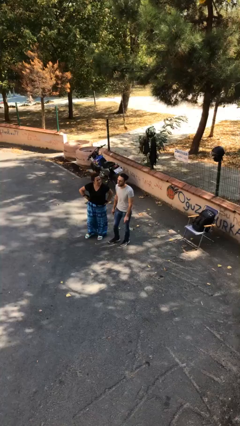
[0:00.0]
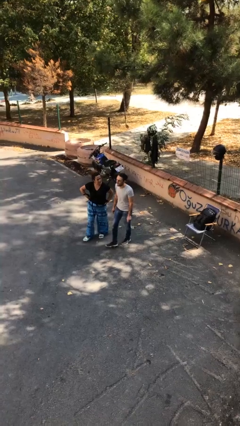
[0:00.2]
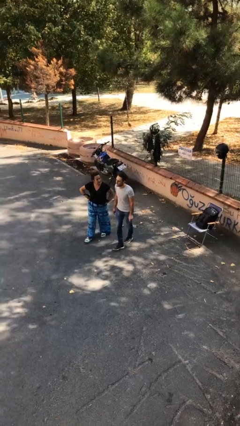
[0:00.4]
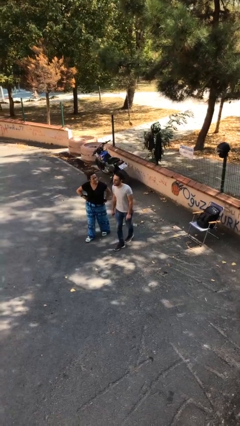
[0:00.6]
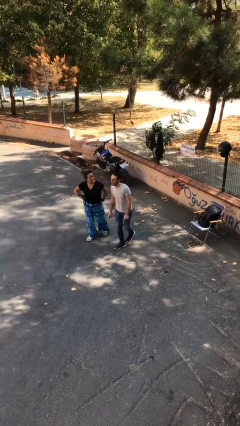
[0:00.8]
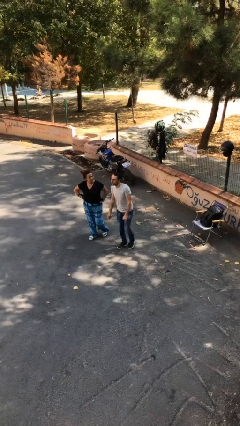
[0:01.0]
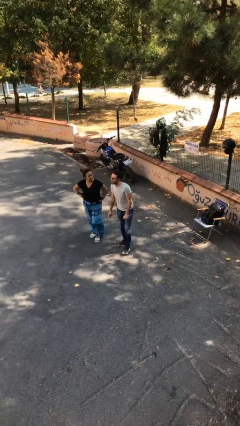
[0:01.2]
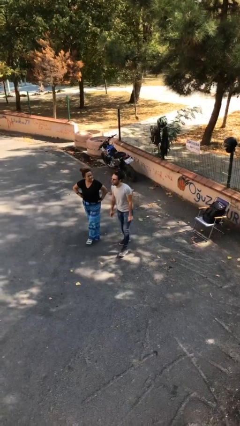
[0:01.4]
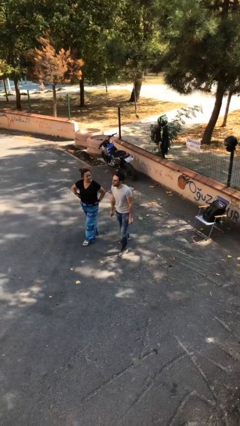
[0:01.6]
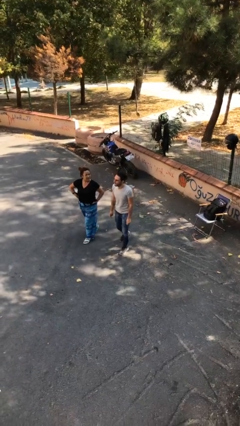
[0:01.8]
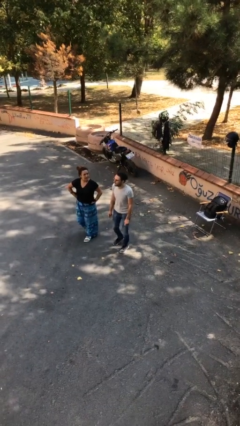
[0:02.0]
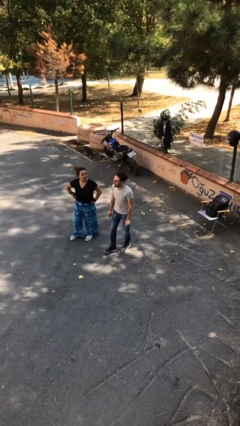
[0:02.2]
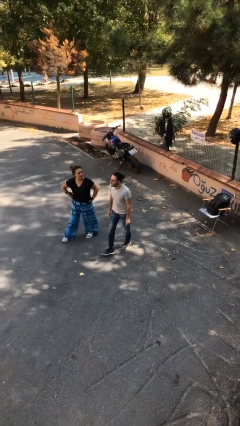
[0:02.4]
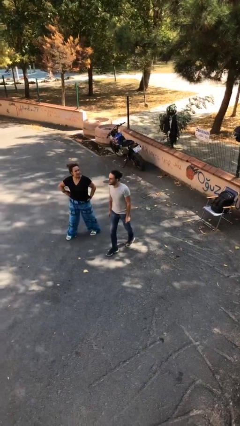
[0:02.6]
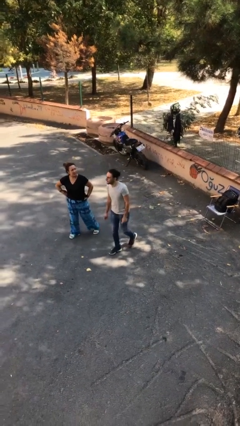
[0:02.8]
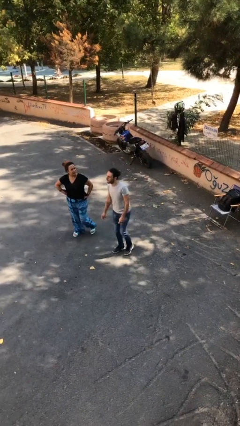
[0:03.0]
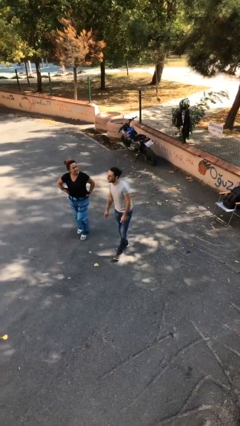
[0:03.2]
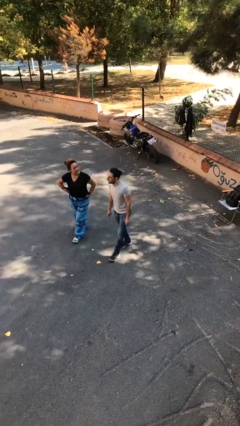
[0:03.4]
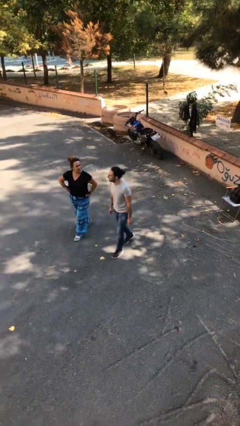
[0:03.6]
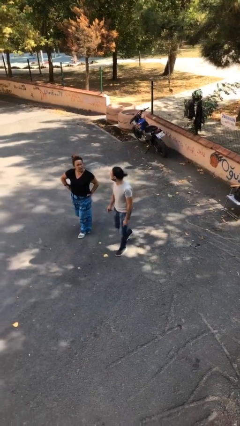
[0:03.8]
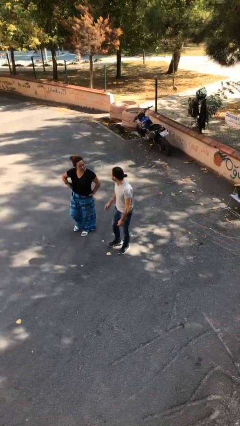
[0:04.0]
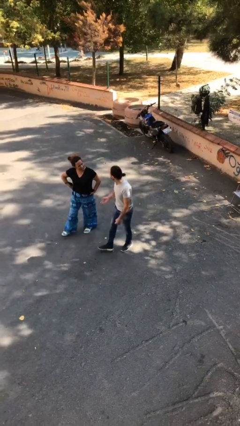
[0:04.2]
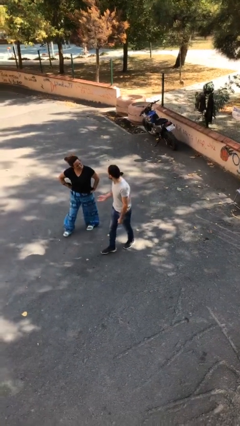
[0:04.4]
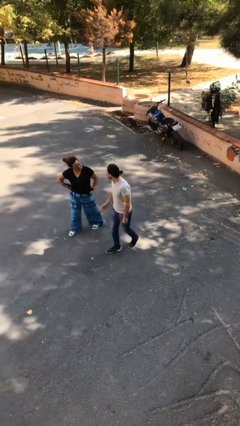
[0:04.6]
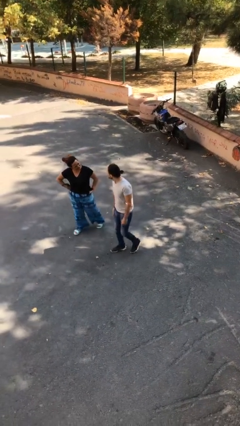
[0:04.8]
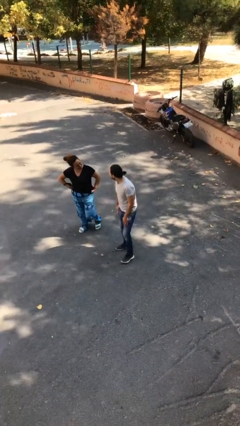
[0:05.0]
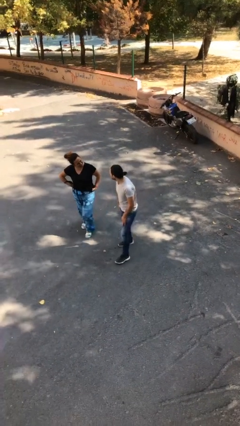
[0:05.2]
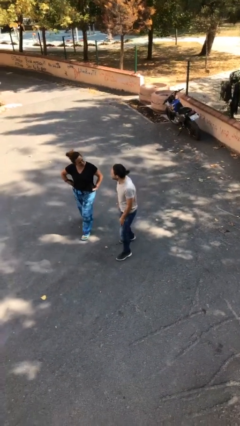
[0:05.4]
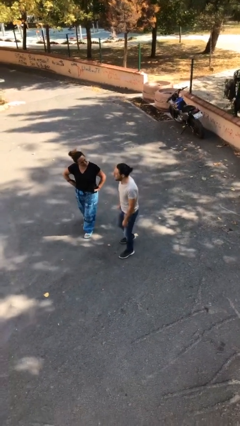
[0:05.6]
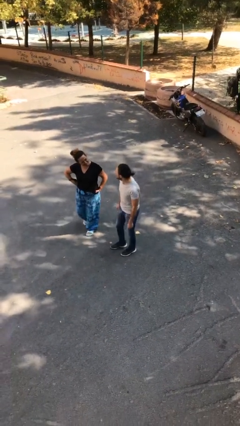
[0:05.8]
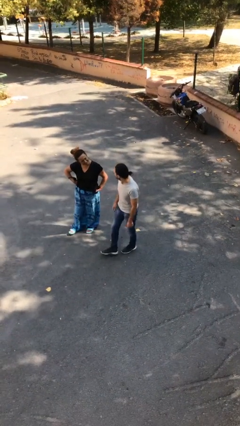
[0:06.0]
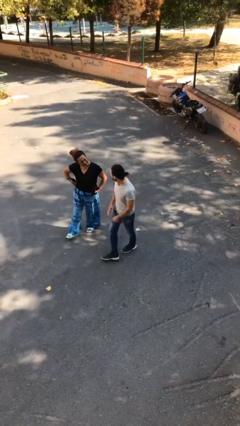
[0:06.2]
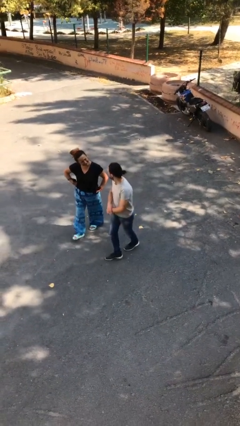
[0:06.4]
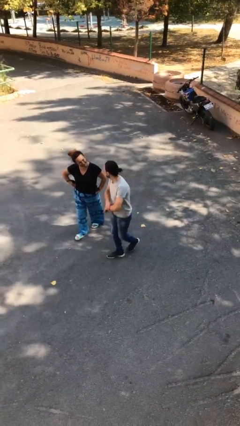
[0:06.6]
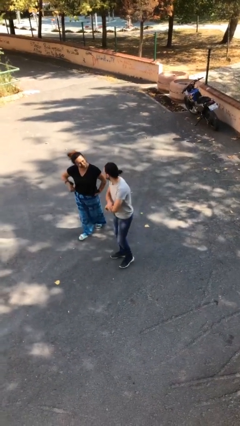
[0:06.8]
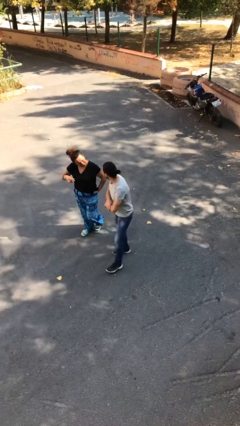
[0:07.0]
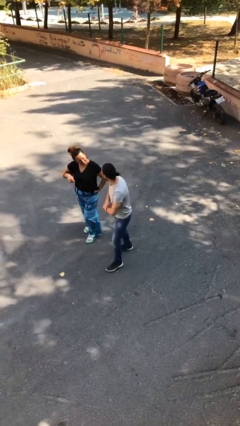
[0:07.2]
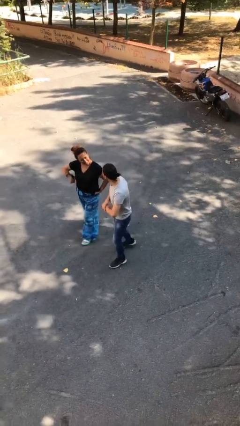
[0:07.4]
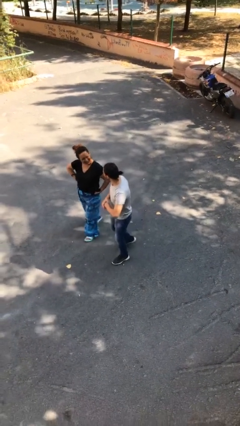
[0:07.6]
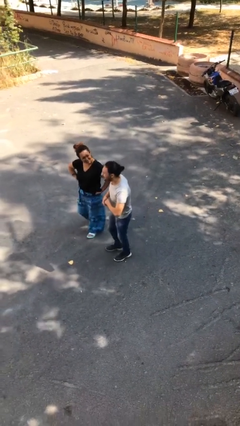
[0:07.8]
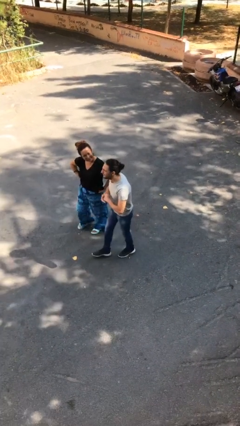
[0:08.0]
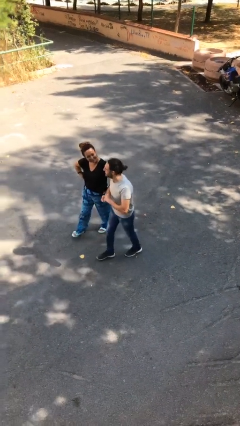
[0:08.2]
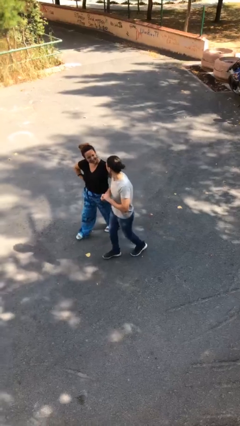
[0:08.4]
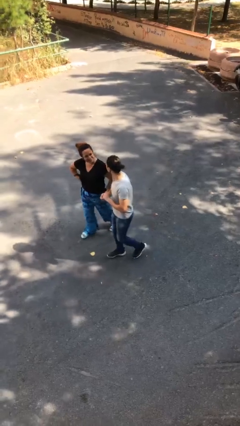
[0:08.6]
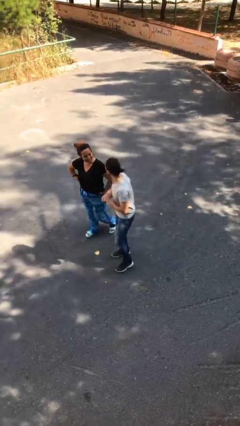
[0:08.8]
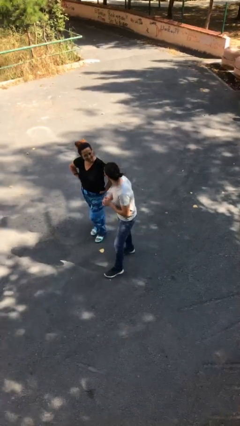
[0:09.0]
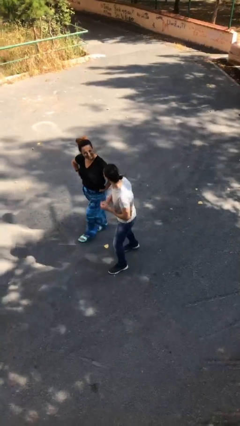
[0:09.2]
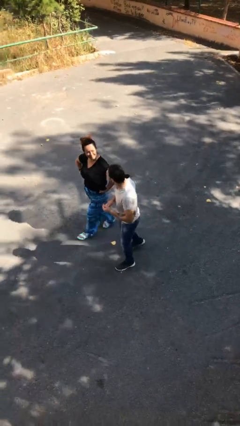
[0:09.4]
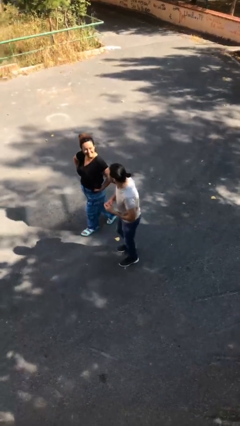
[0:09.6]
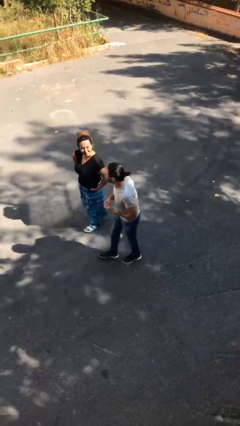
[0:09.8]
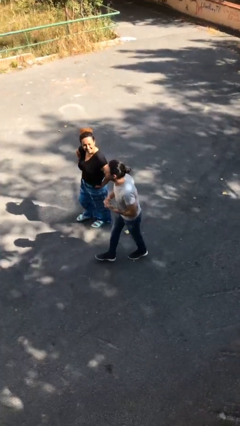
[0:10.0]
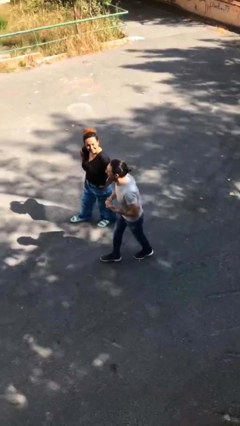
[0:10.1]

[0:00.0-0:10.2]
person talks to person

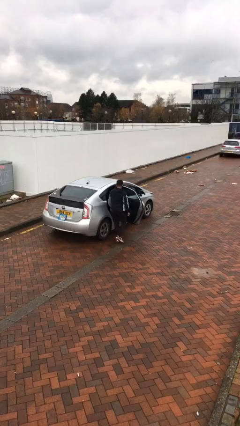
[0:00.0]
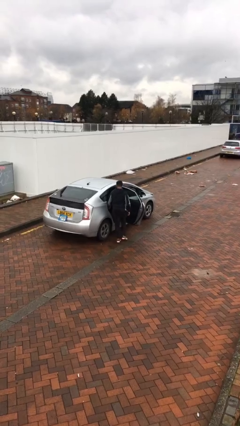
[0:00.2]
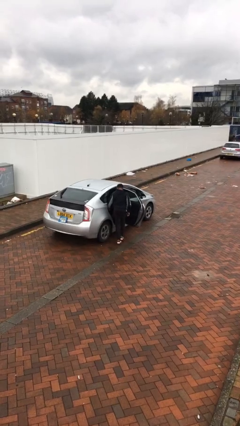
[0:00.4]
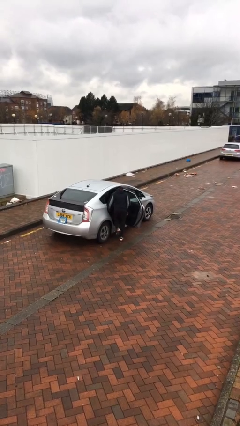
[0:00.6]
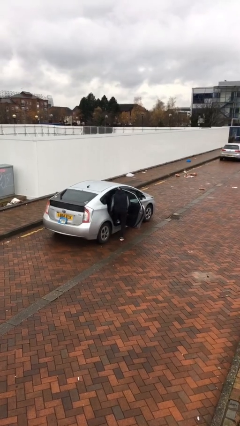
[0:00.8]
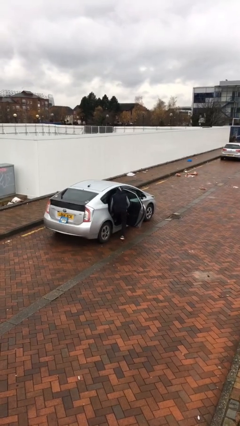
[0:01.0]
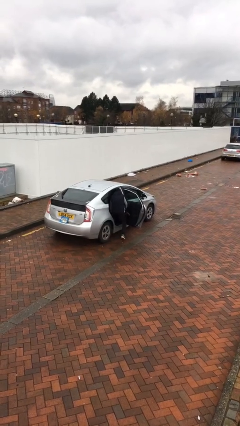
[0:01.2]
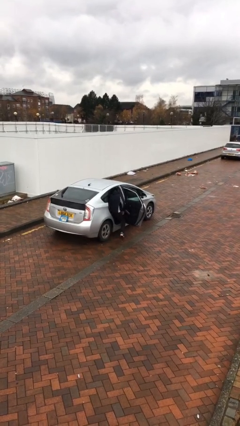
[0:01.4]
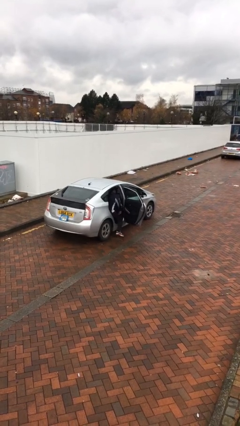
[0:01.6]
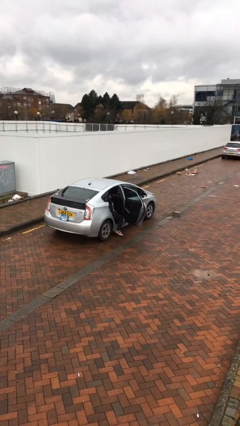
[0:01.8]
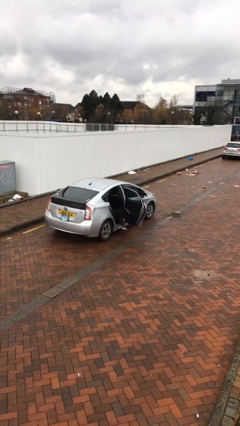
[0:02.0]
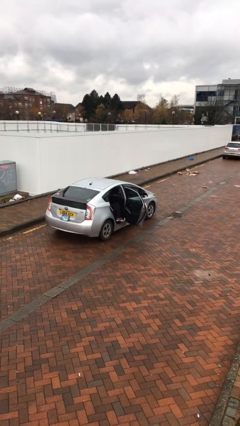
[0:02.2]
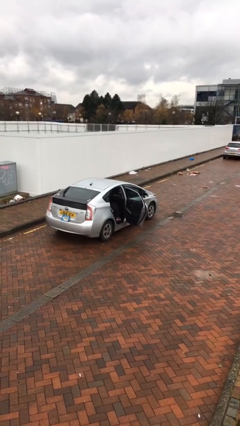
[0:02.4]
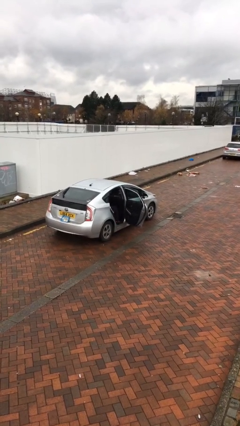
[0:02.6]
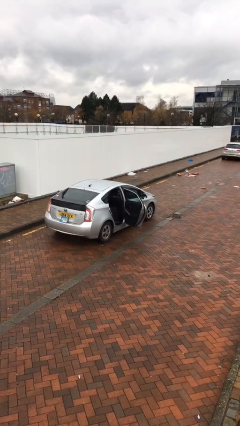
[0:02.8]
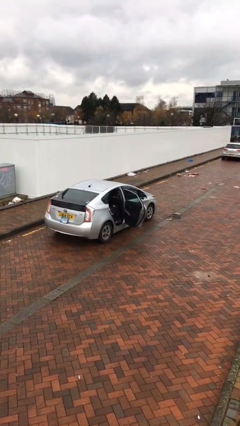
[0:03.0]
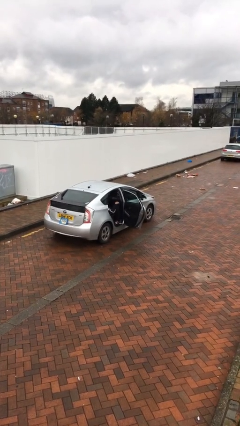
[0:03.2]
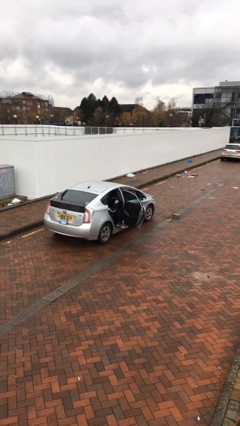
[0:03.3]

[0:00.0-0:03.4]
person enters car

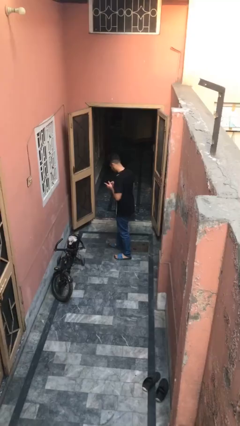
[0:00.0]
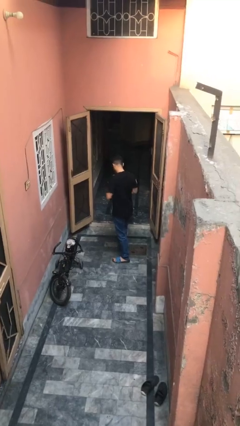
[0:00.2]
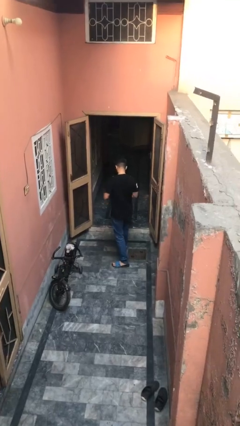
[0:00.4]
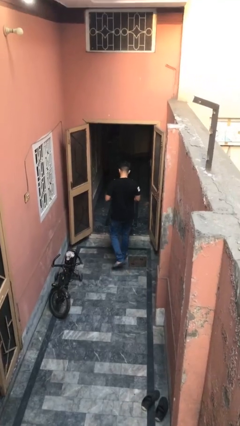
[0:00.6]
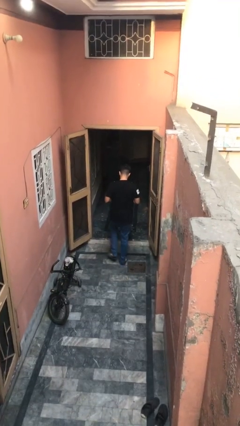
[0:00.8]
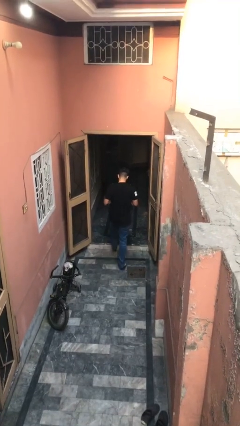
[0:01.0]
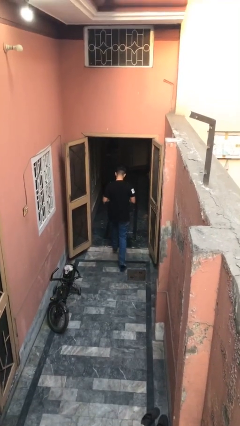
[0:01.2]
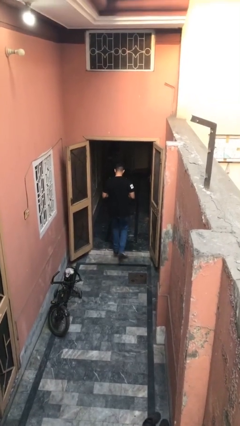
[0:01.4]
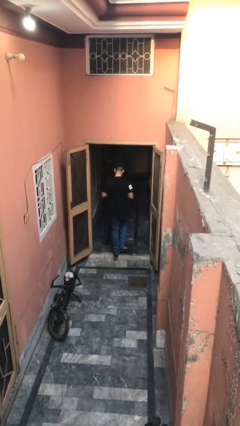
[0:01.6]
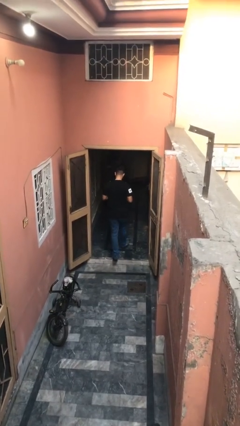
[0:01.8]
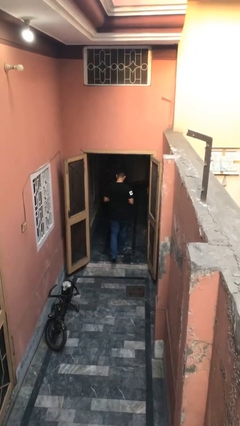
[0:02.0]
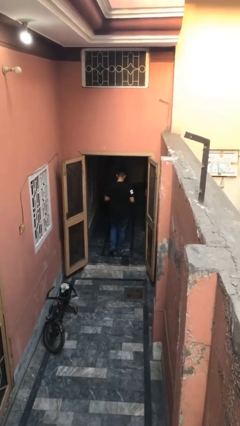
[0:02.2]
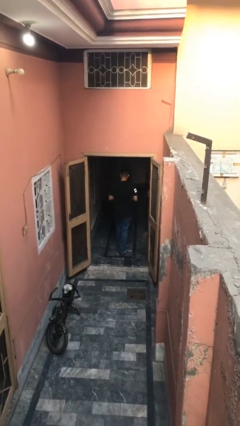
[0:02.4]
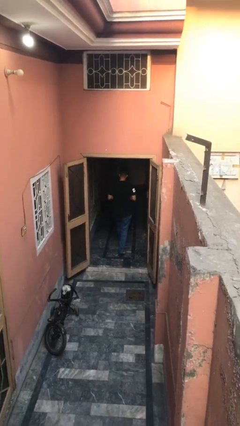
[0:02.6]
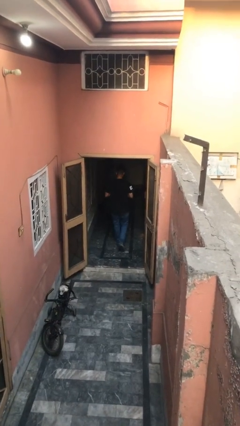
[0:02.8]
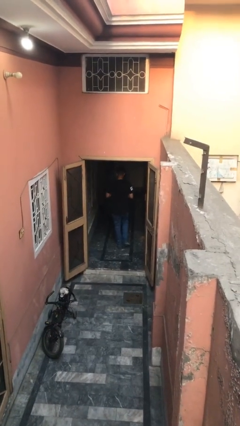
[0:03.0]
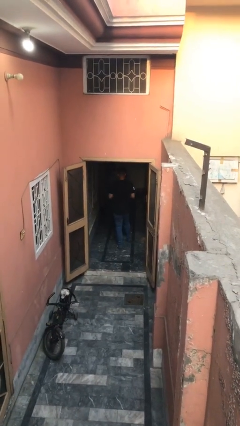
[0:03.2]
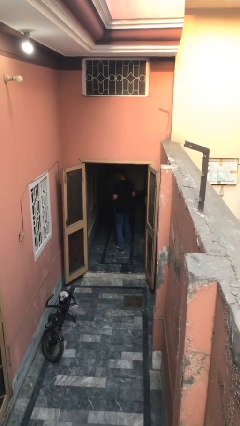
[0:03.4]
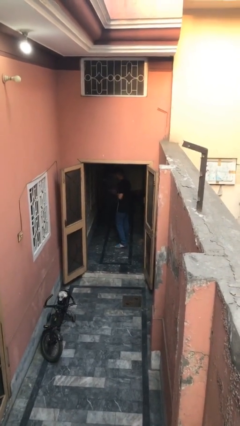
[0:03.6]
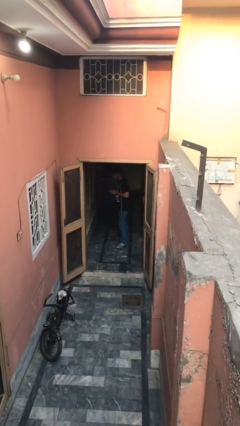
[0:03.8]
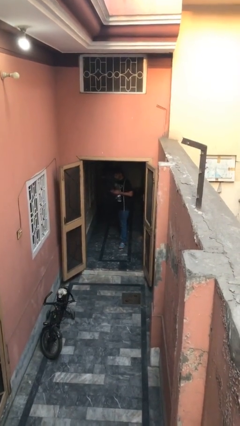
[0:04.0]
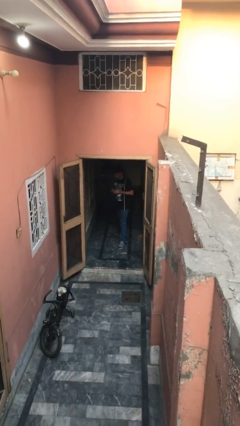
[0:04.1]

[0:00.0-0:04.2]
person exits scene through structure
